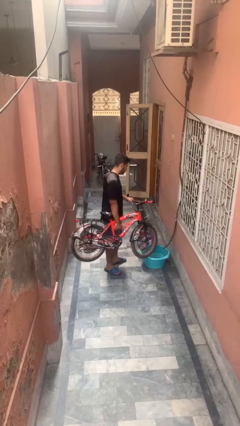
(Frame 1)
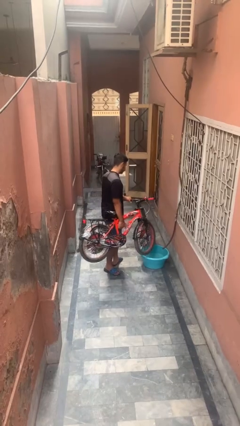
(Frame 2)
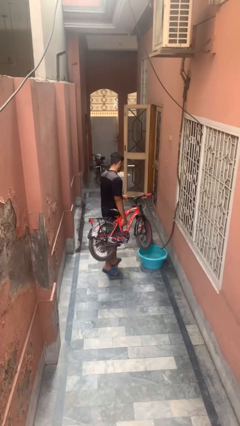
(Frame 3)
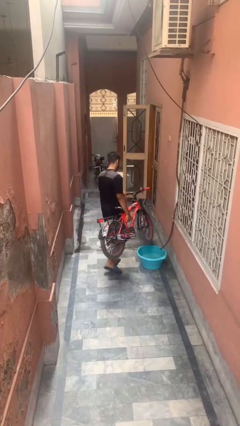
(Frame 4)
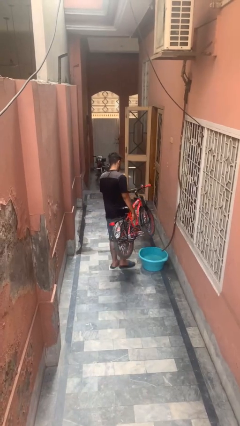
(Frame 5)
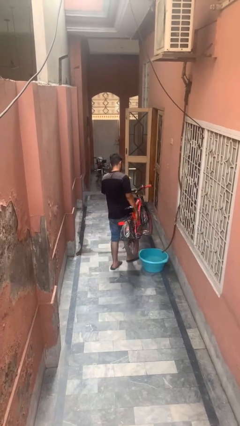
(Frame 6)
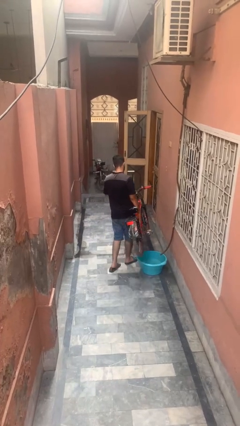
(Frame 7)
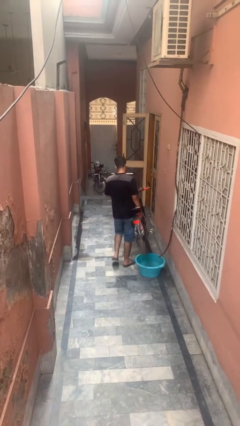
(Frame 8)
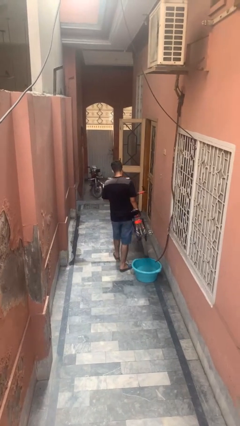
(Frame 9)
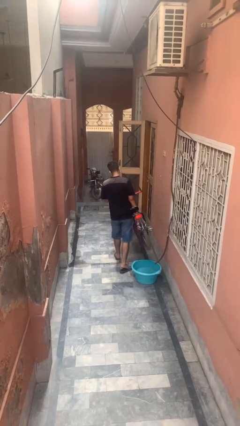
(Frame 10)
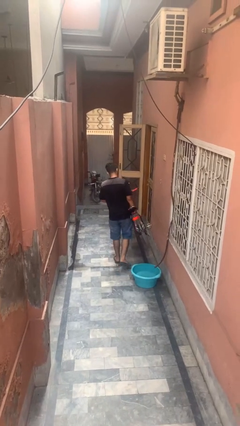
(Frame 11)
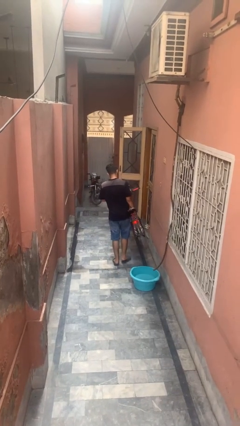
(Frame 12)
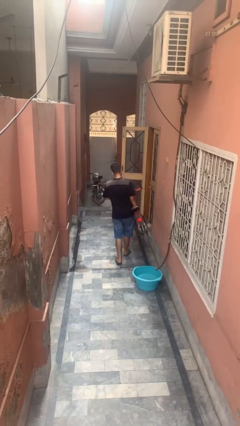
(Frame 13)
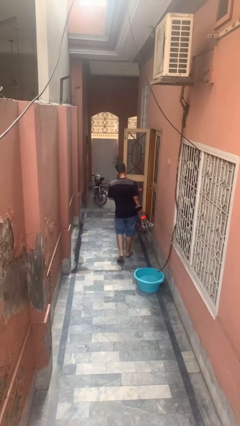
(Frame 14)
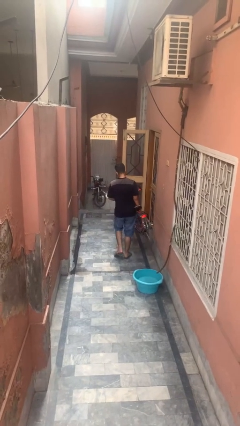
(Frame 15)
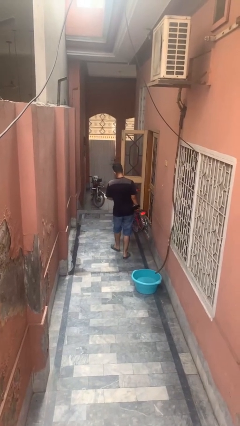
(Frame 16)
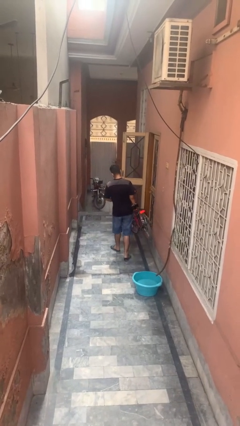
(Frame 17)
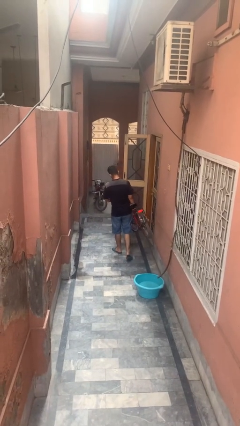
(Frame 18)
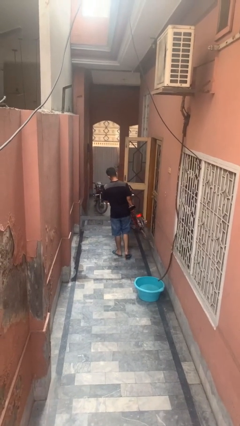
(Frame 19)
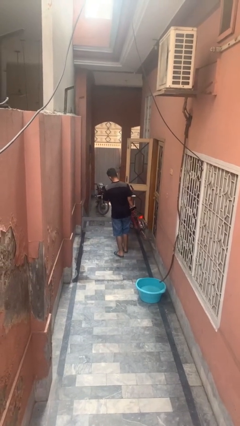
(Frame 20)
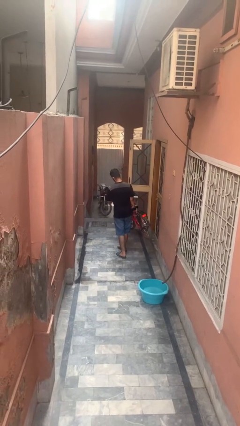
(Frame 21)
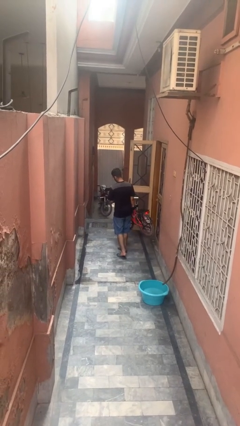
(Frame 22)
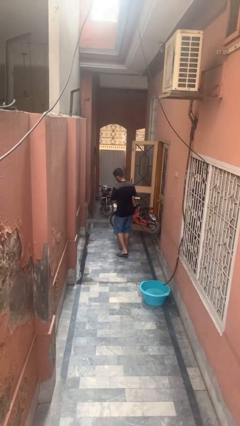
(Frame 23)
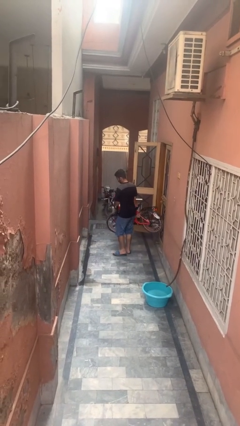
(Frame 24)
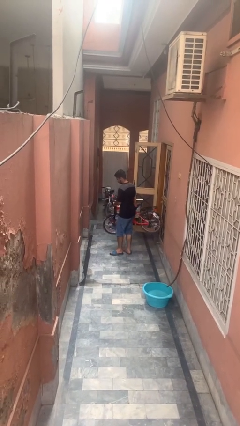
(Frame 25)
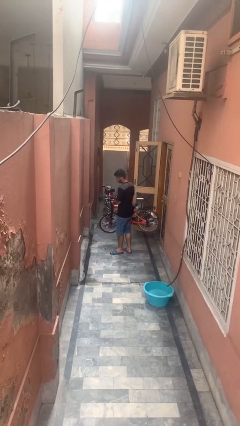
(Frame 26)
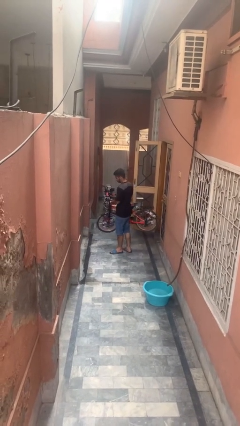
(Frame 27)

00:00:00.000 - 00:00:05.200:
person carries bicycle

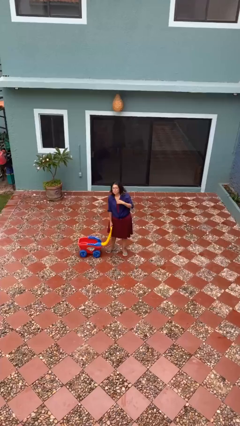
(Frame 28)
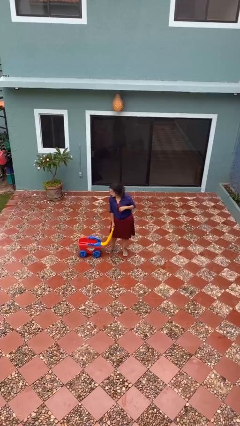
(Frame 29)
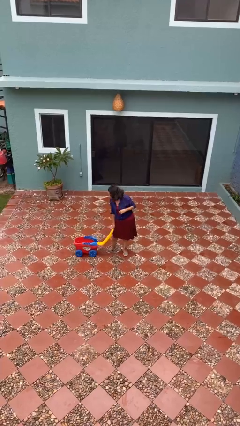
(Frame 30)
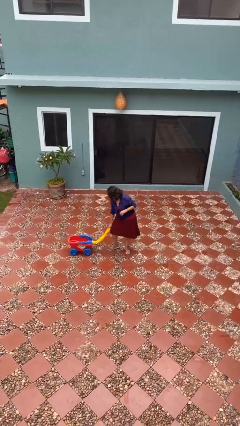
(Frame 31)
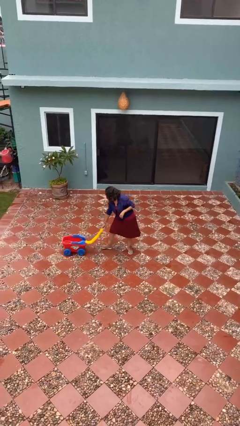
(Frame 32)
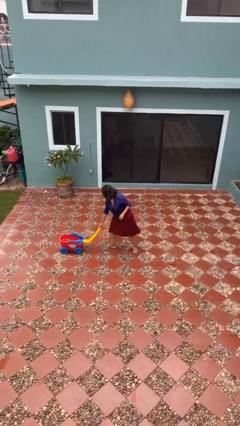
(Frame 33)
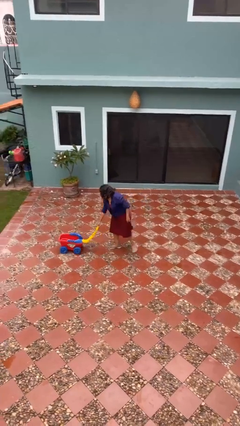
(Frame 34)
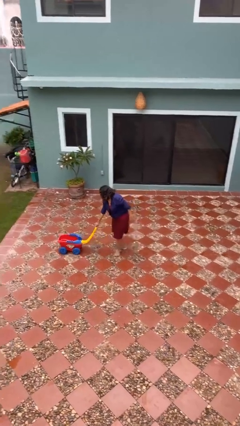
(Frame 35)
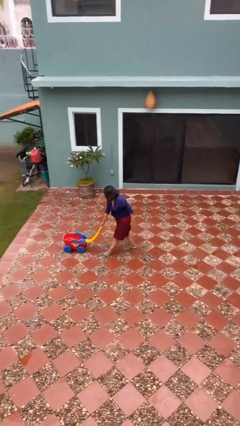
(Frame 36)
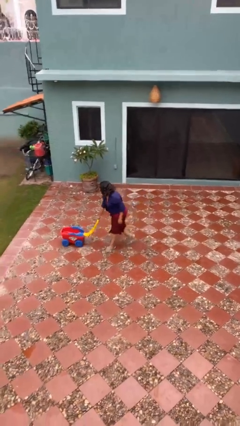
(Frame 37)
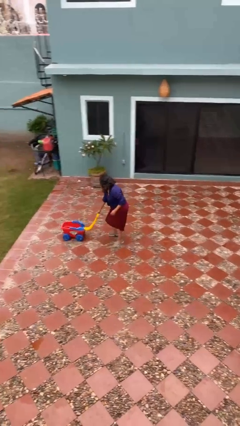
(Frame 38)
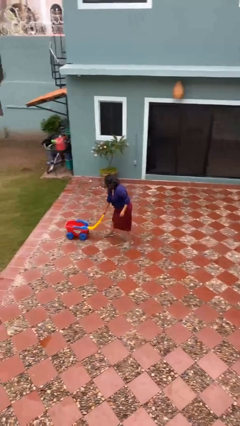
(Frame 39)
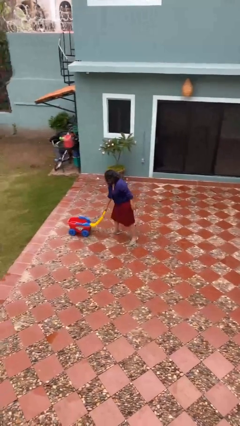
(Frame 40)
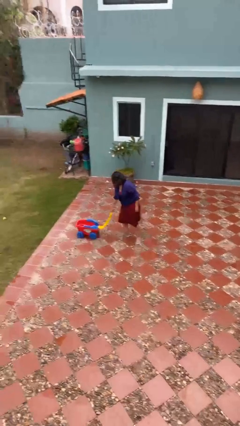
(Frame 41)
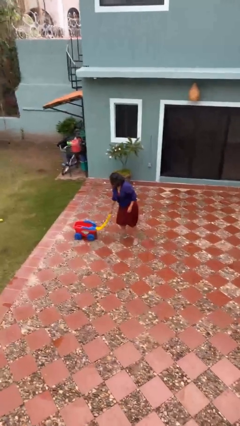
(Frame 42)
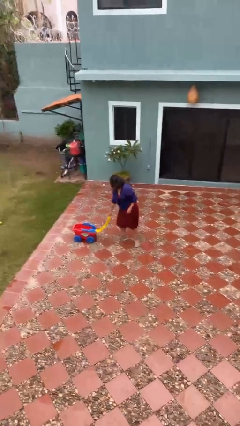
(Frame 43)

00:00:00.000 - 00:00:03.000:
person pushes wheeled cart

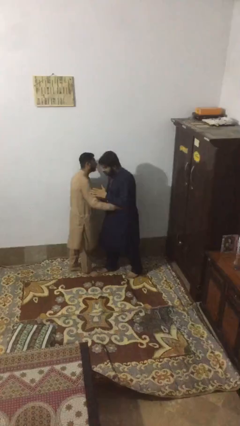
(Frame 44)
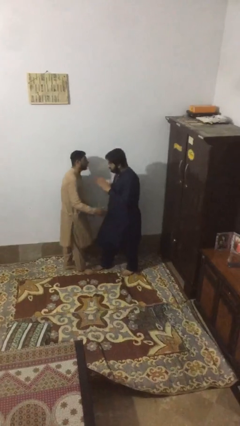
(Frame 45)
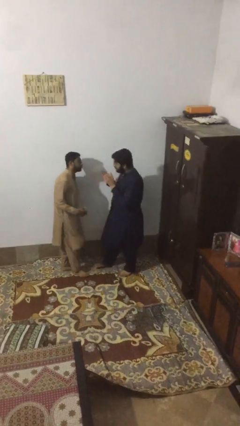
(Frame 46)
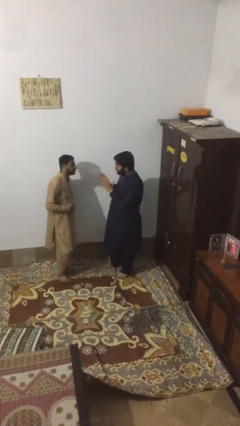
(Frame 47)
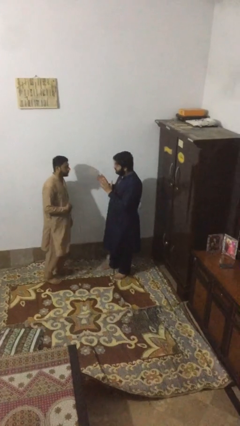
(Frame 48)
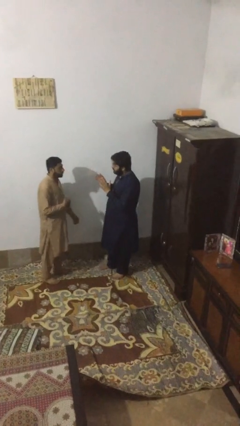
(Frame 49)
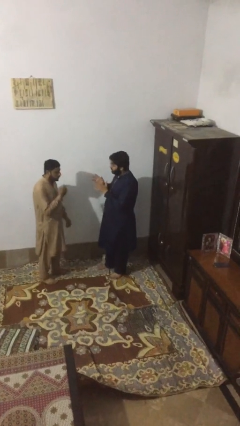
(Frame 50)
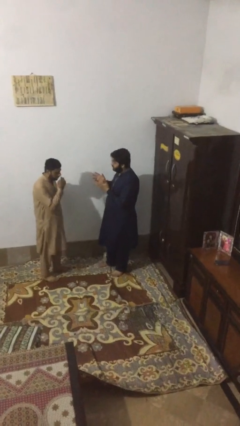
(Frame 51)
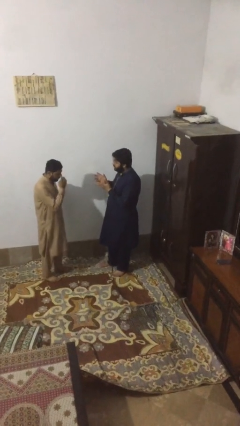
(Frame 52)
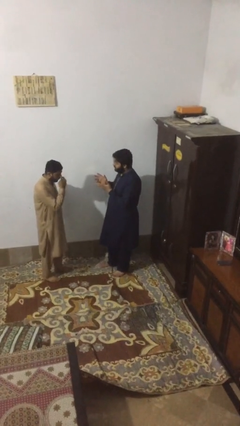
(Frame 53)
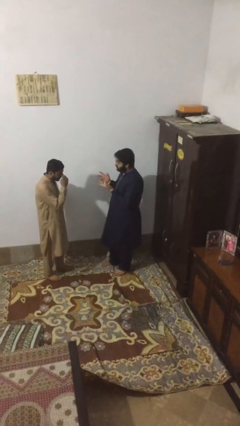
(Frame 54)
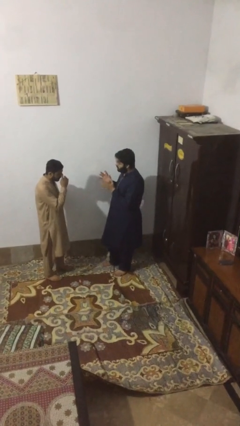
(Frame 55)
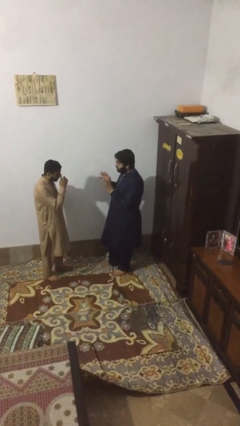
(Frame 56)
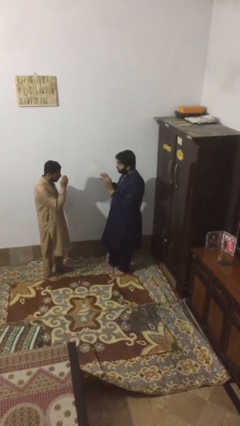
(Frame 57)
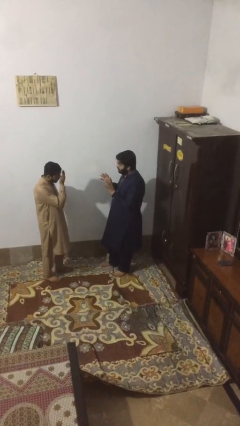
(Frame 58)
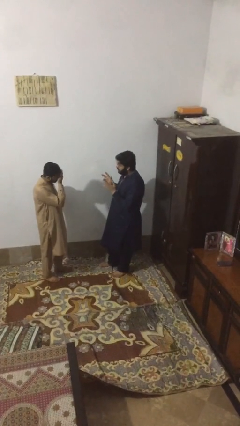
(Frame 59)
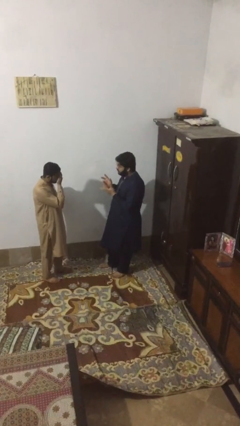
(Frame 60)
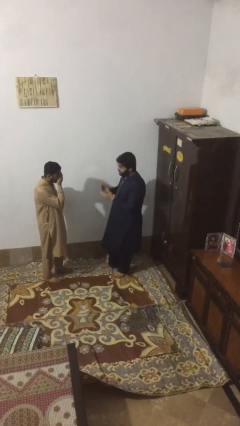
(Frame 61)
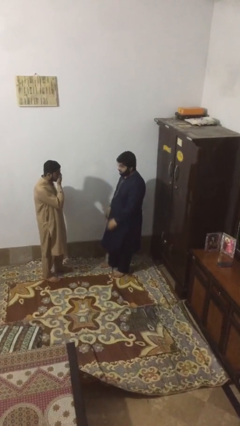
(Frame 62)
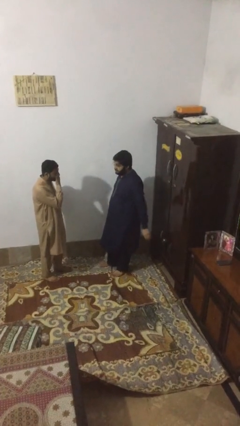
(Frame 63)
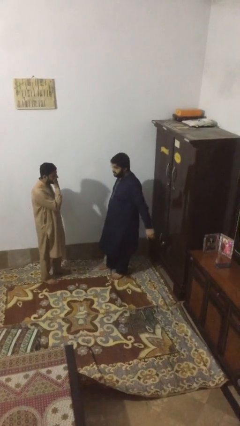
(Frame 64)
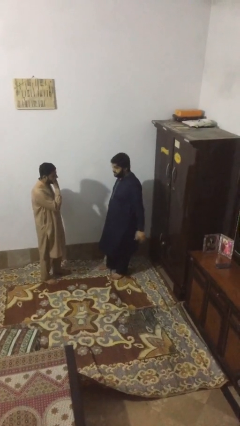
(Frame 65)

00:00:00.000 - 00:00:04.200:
person talks to person

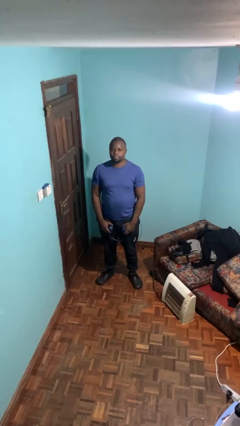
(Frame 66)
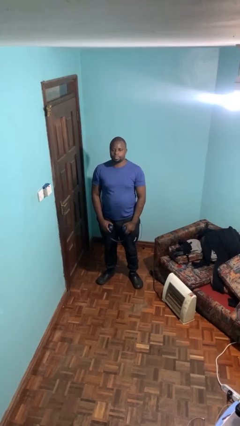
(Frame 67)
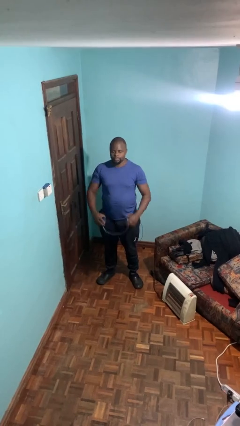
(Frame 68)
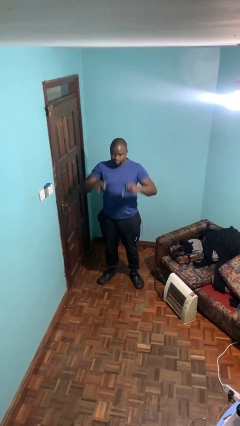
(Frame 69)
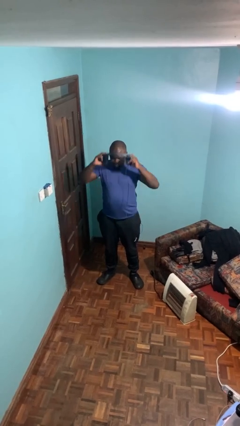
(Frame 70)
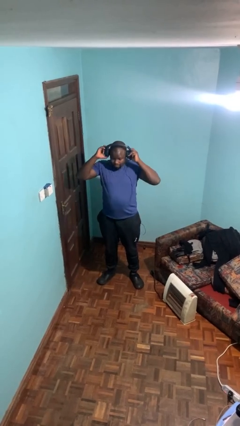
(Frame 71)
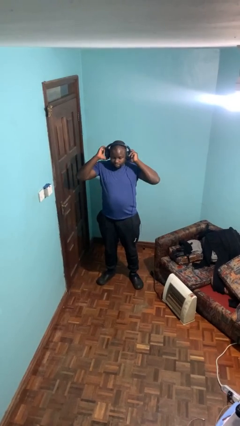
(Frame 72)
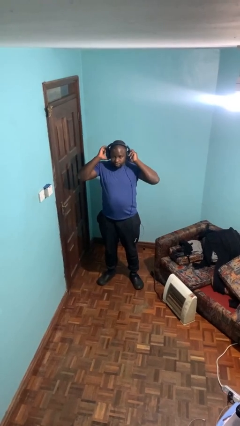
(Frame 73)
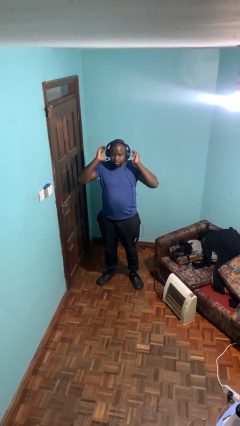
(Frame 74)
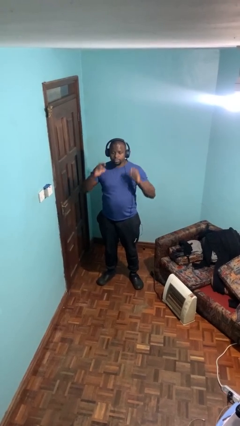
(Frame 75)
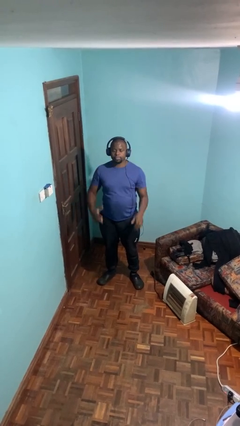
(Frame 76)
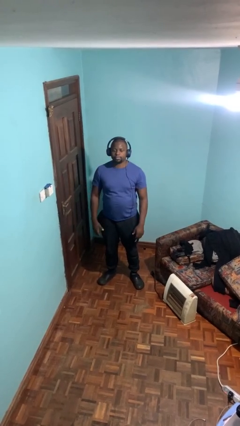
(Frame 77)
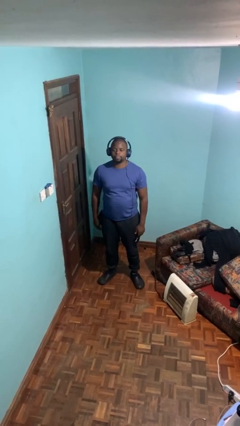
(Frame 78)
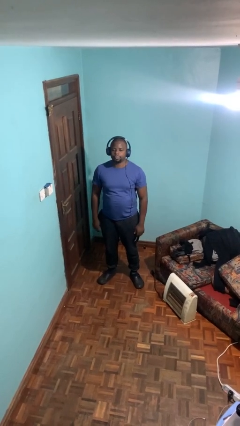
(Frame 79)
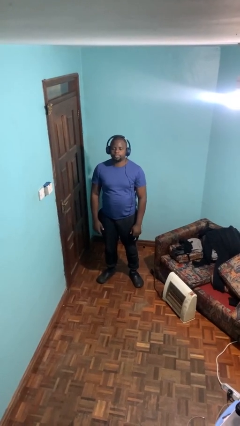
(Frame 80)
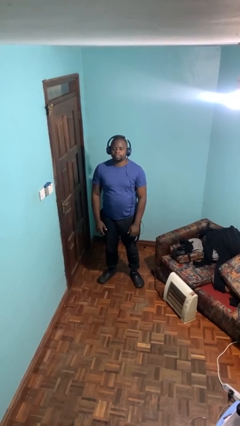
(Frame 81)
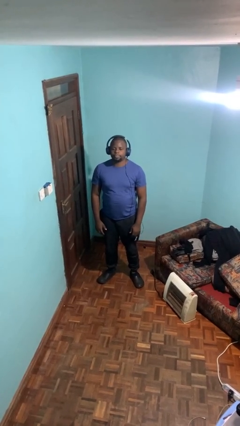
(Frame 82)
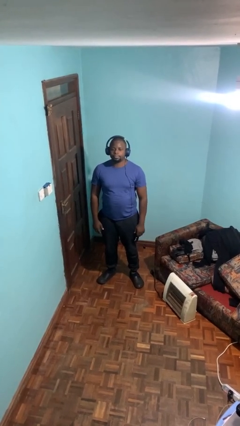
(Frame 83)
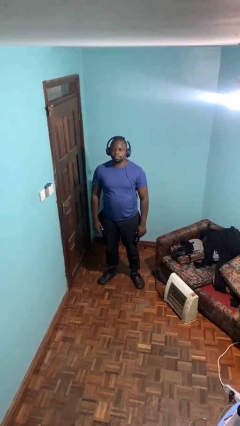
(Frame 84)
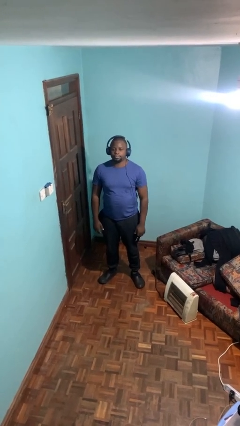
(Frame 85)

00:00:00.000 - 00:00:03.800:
person puts on headphones

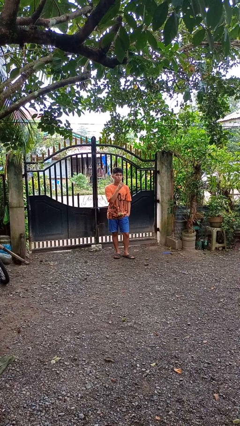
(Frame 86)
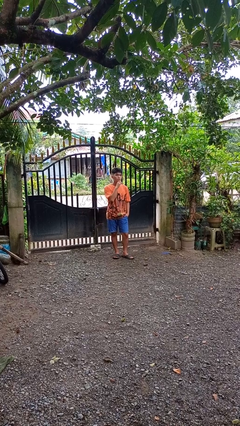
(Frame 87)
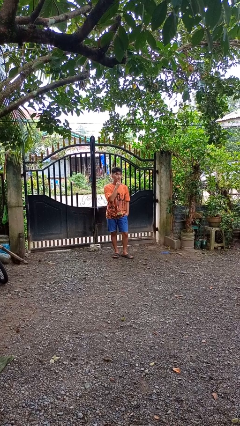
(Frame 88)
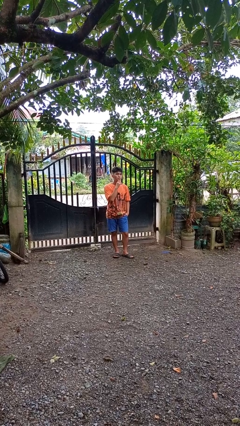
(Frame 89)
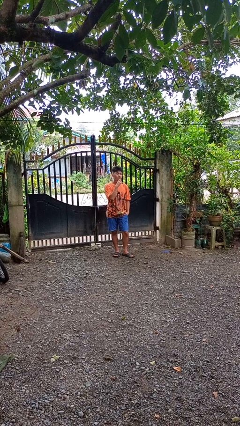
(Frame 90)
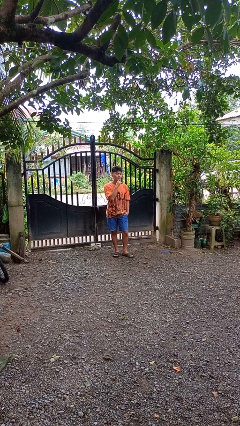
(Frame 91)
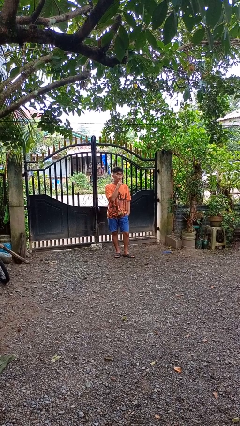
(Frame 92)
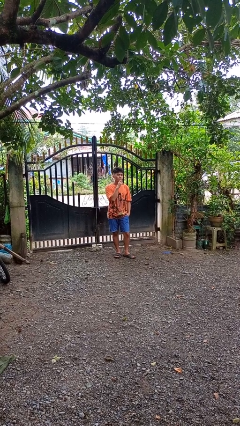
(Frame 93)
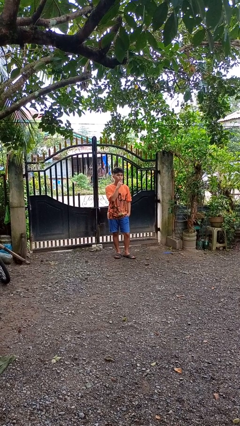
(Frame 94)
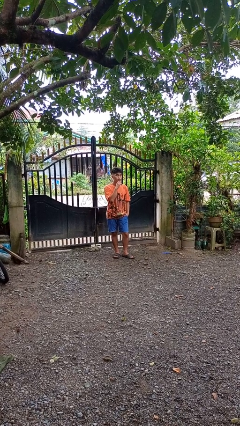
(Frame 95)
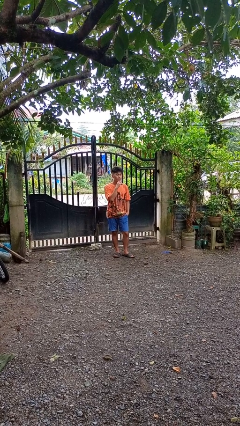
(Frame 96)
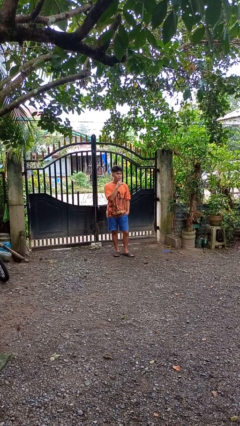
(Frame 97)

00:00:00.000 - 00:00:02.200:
person strokes chin
